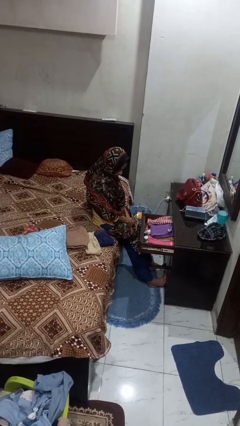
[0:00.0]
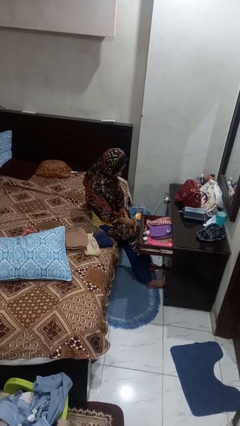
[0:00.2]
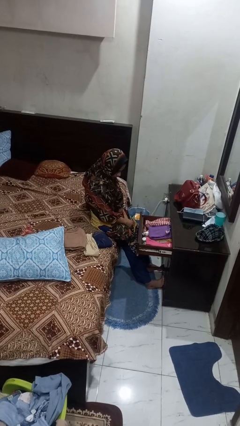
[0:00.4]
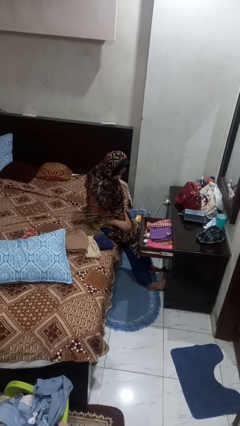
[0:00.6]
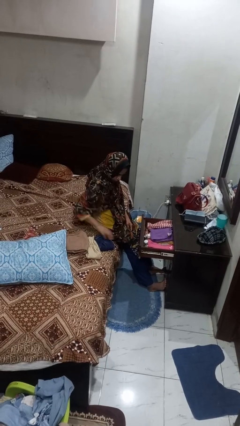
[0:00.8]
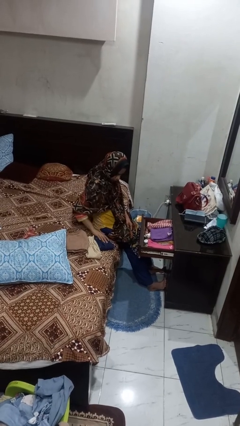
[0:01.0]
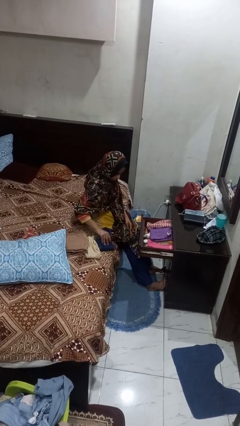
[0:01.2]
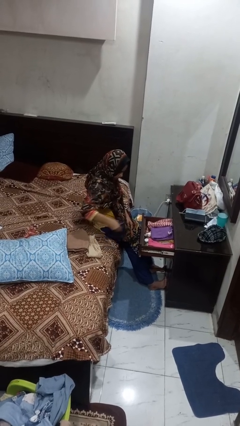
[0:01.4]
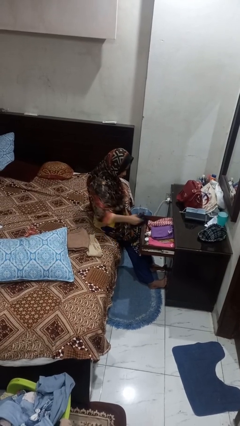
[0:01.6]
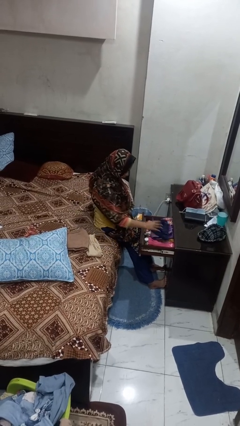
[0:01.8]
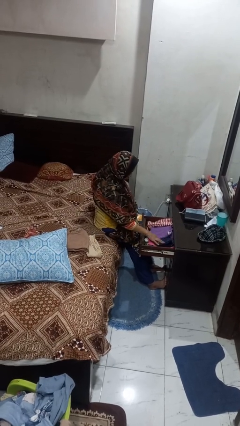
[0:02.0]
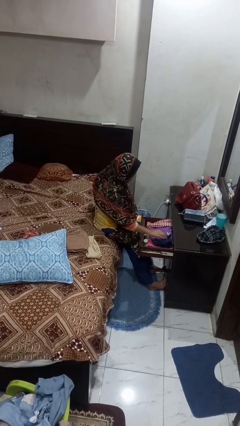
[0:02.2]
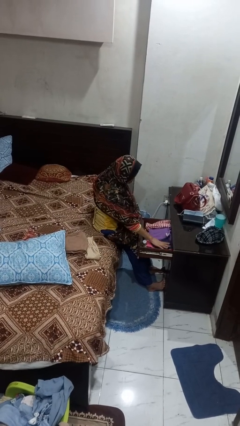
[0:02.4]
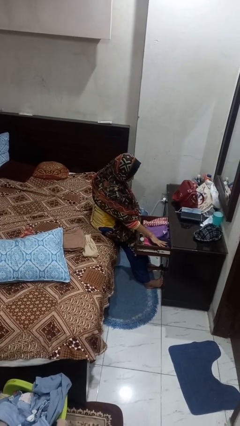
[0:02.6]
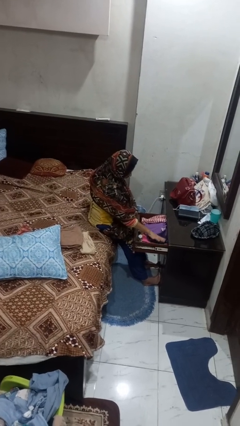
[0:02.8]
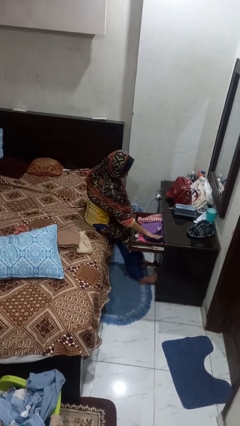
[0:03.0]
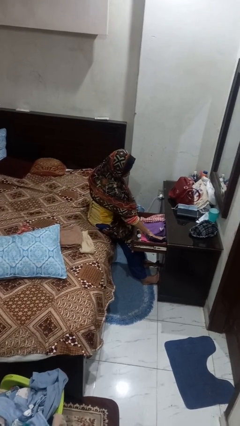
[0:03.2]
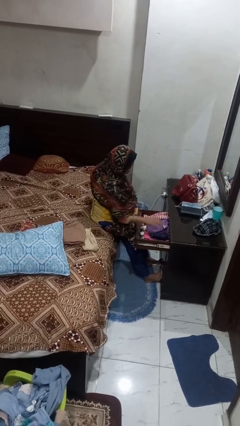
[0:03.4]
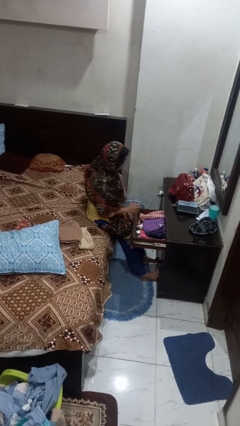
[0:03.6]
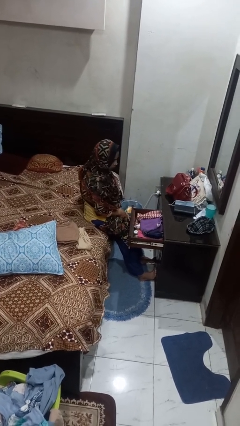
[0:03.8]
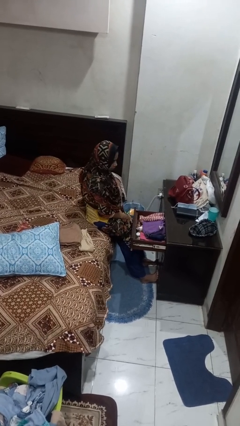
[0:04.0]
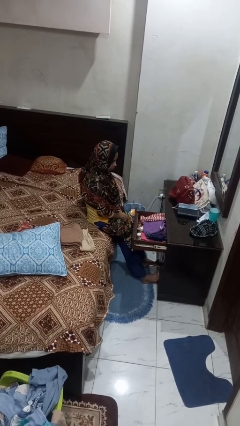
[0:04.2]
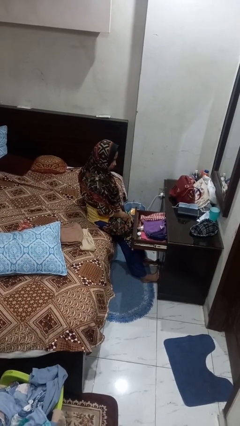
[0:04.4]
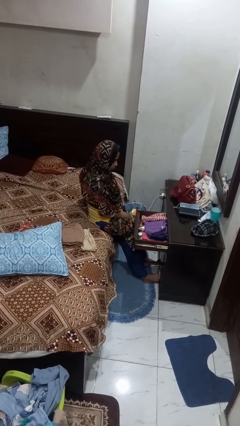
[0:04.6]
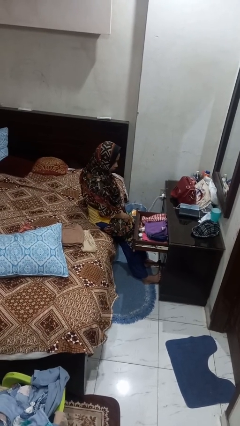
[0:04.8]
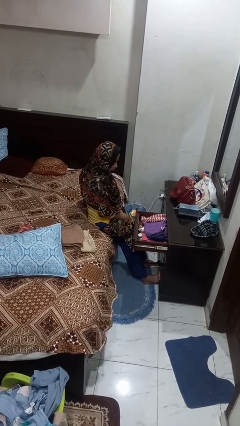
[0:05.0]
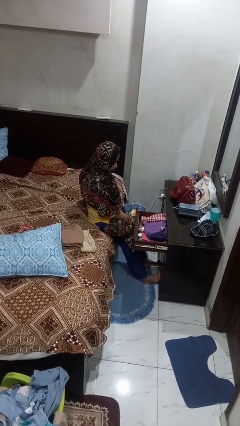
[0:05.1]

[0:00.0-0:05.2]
person puts clothes into dresser

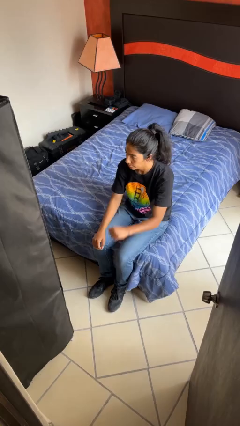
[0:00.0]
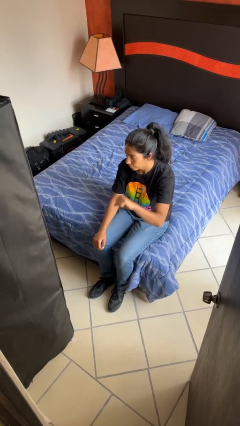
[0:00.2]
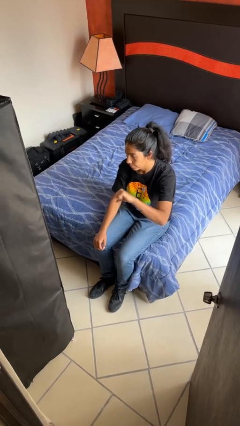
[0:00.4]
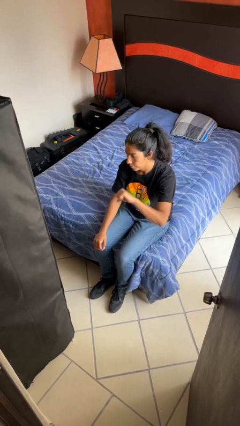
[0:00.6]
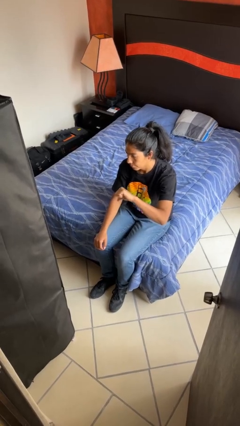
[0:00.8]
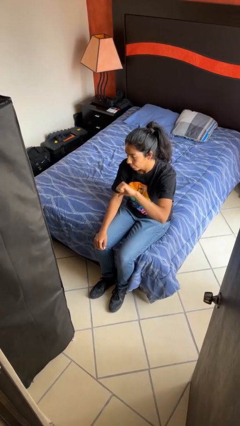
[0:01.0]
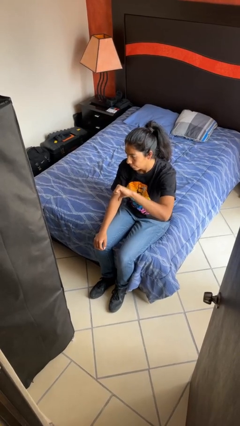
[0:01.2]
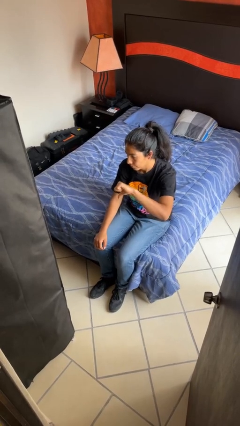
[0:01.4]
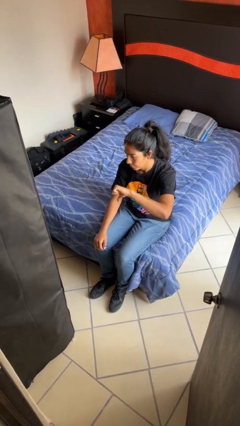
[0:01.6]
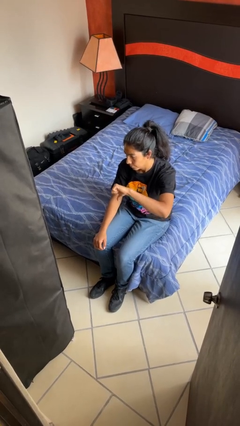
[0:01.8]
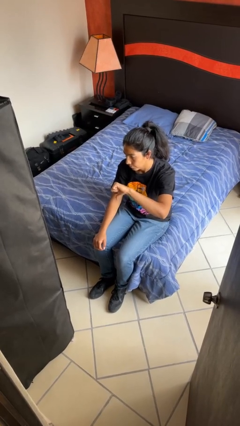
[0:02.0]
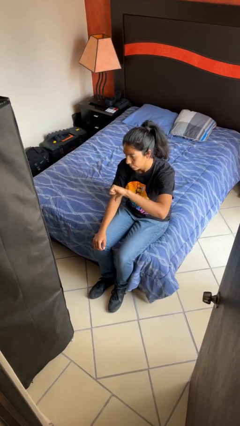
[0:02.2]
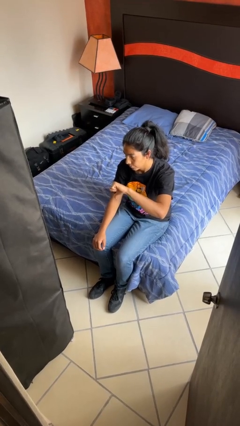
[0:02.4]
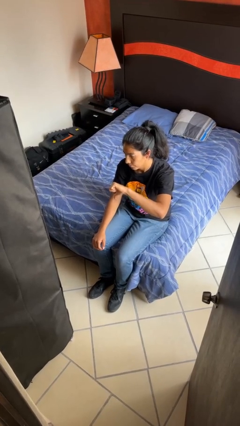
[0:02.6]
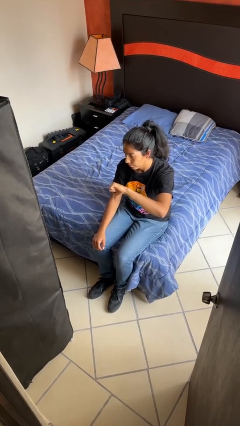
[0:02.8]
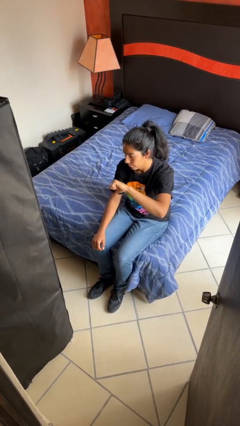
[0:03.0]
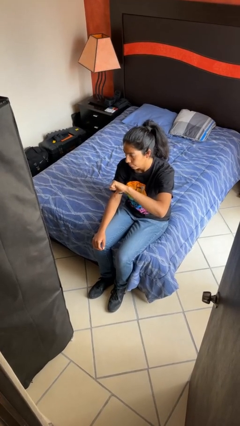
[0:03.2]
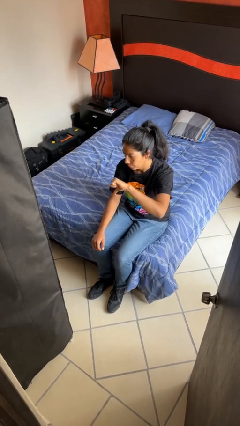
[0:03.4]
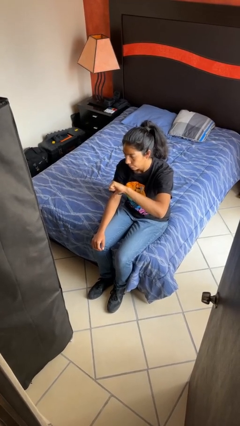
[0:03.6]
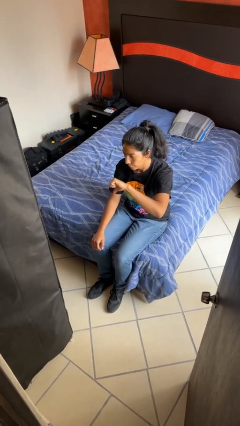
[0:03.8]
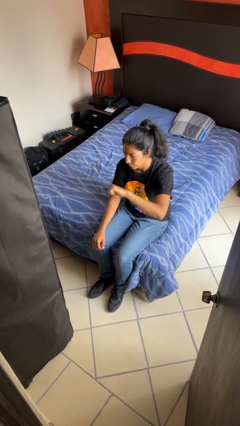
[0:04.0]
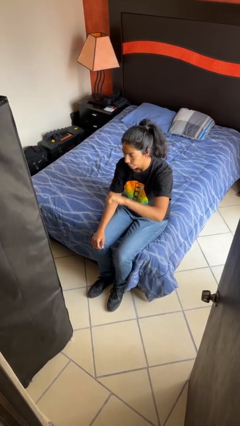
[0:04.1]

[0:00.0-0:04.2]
person gestures thumbs down

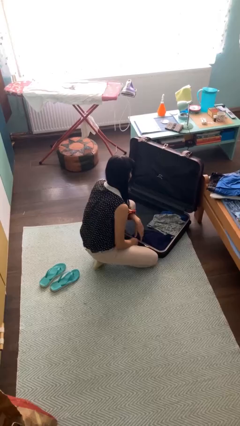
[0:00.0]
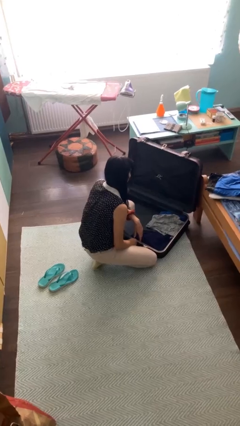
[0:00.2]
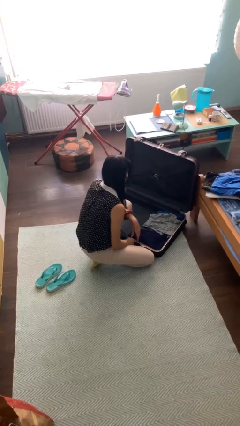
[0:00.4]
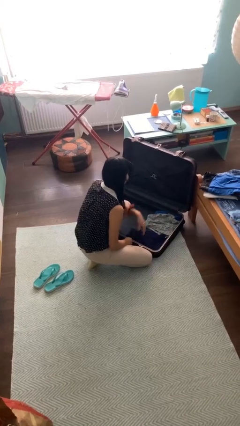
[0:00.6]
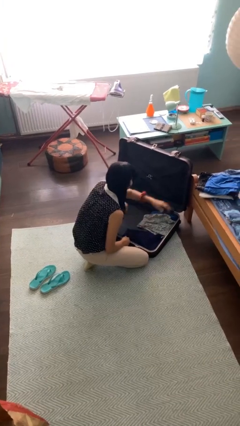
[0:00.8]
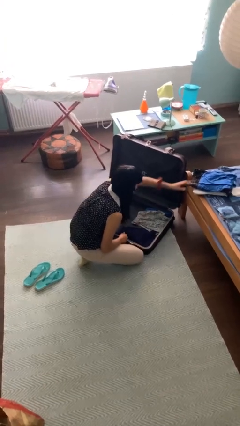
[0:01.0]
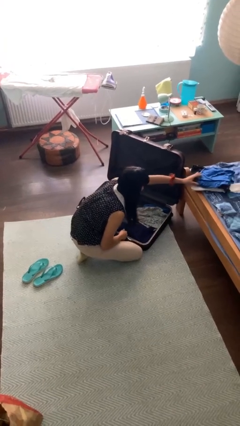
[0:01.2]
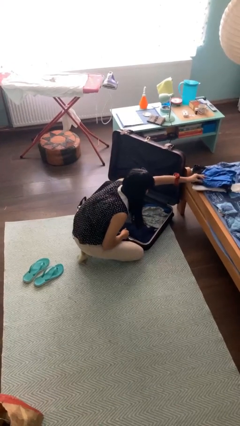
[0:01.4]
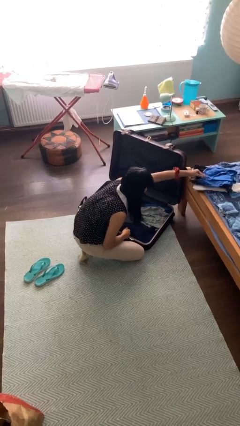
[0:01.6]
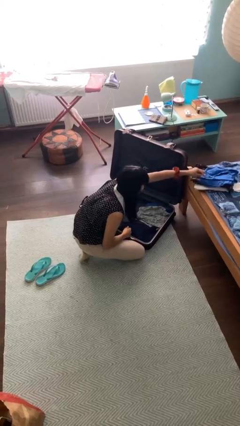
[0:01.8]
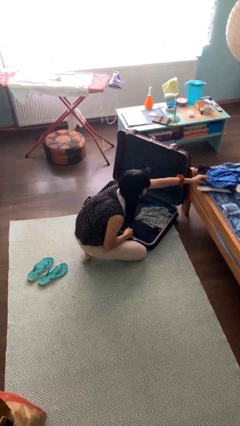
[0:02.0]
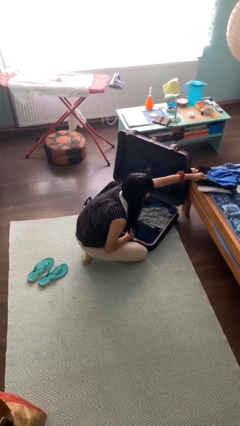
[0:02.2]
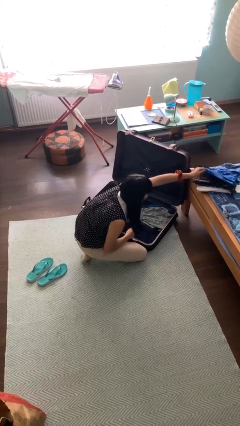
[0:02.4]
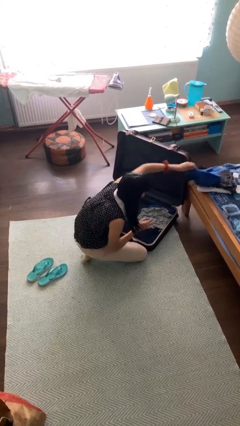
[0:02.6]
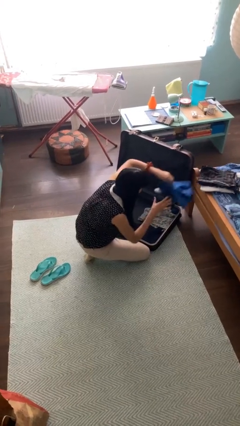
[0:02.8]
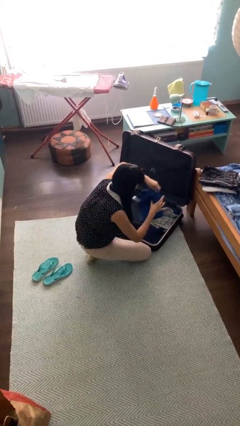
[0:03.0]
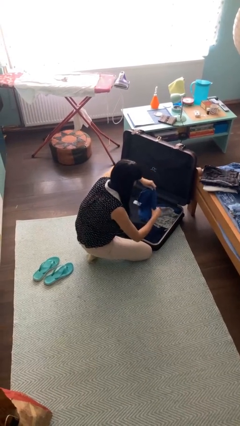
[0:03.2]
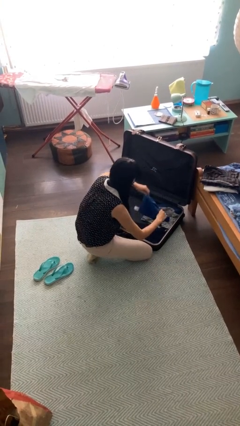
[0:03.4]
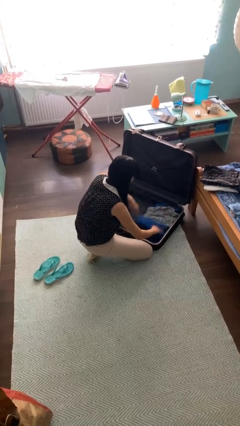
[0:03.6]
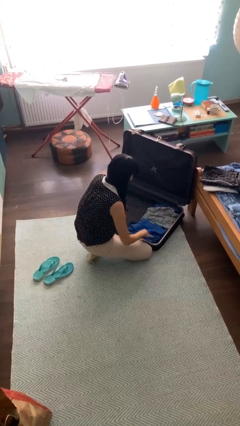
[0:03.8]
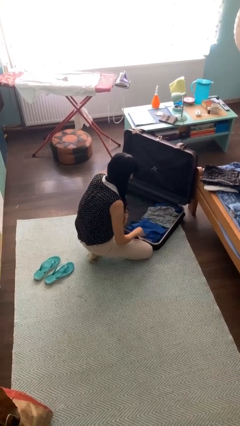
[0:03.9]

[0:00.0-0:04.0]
person loads clothes into suitcase

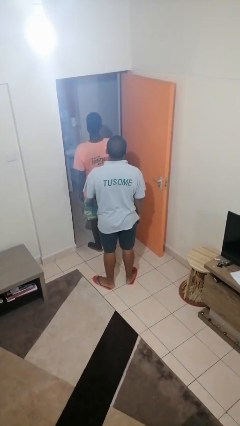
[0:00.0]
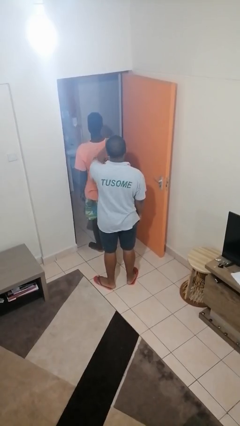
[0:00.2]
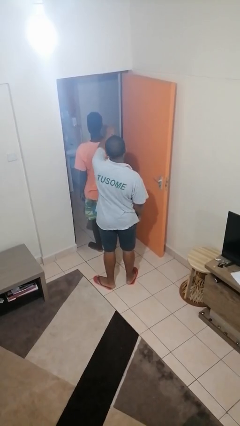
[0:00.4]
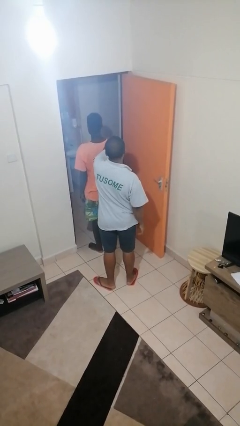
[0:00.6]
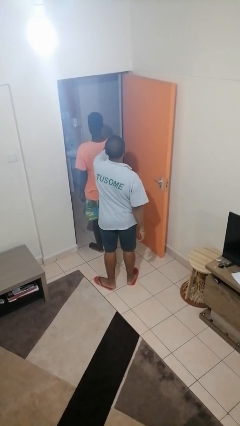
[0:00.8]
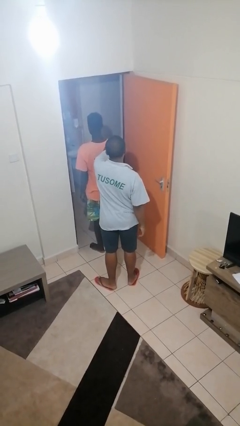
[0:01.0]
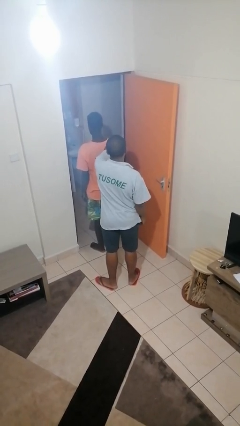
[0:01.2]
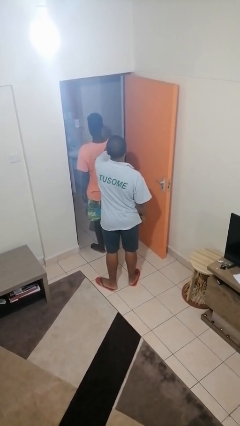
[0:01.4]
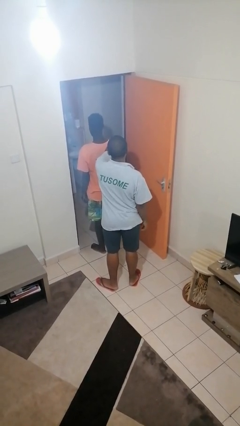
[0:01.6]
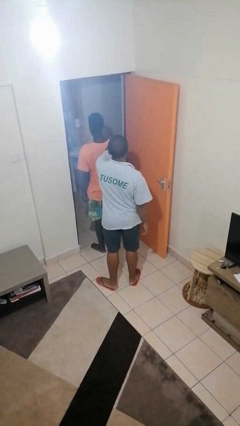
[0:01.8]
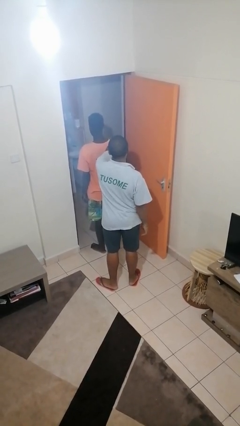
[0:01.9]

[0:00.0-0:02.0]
person grabs person by shoulder

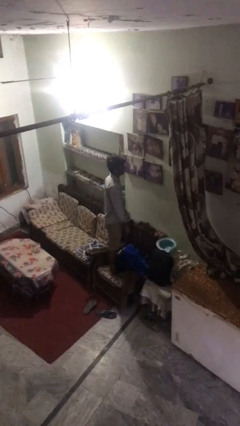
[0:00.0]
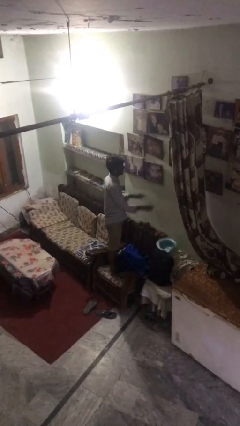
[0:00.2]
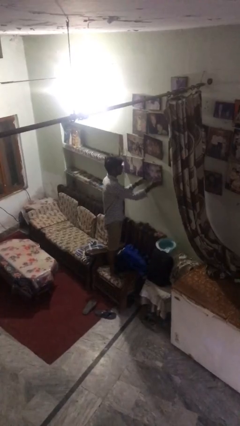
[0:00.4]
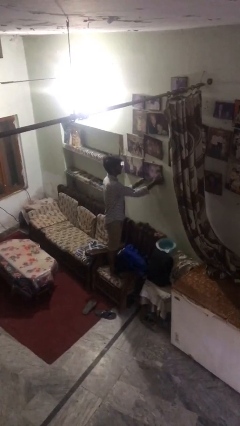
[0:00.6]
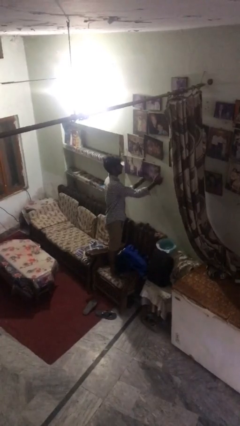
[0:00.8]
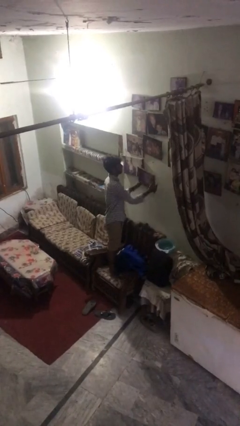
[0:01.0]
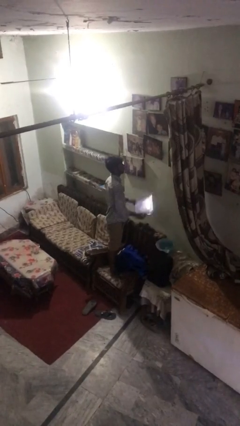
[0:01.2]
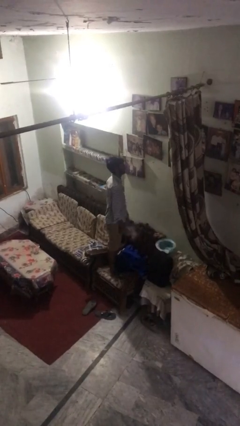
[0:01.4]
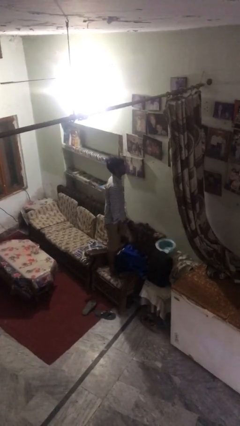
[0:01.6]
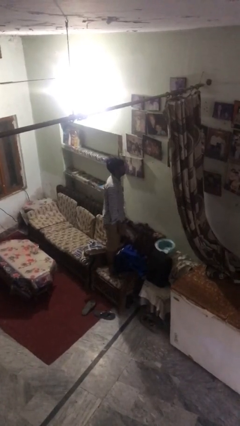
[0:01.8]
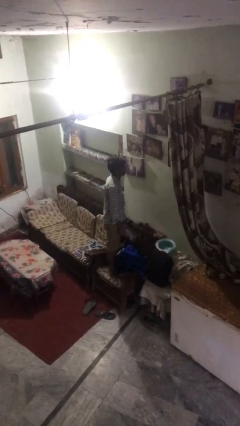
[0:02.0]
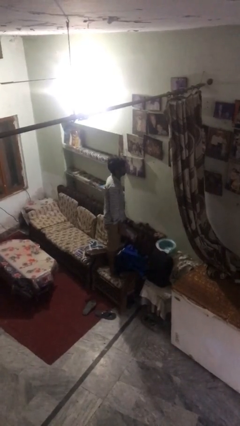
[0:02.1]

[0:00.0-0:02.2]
person takes down picture frame

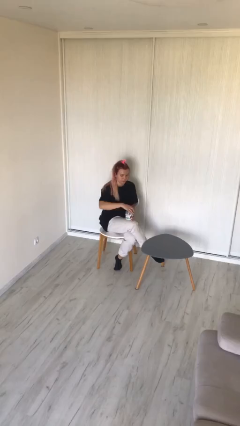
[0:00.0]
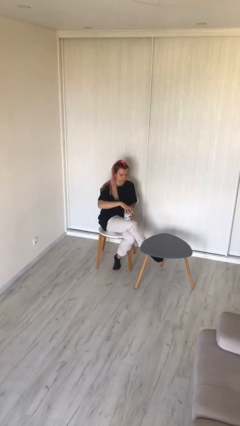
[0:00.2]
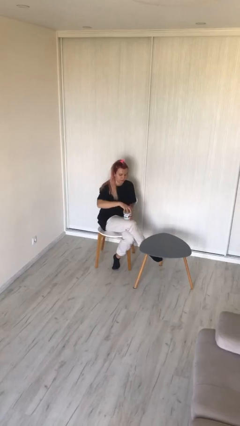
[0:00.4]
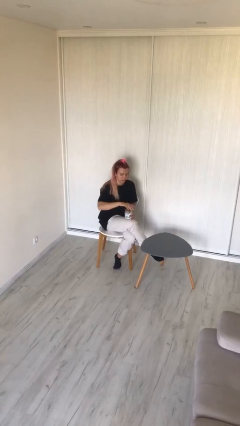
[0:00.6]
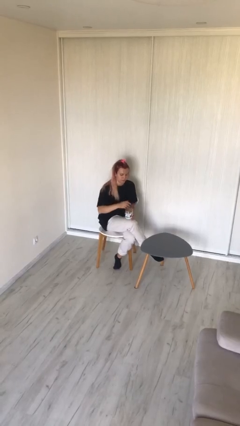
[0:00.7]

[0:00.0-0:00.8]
person closes jar
